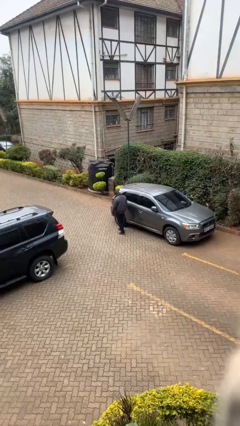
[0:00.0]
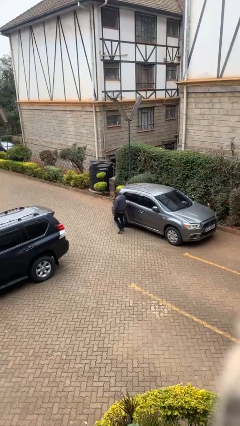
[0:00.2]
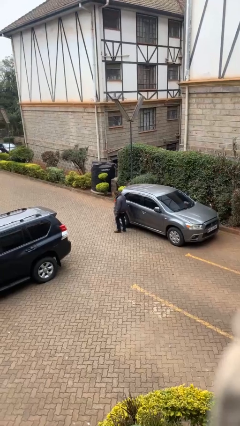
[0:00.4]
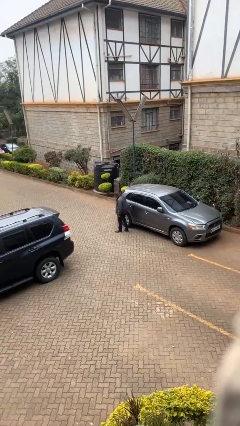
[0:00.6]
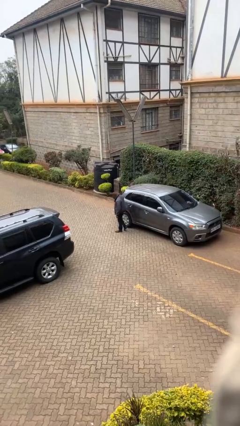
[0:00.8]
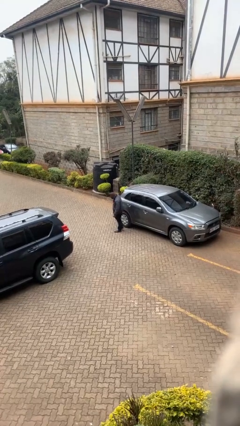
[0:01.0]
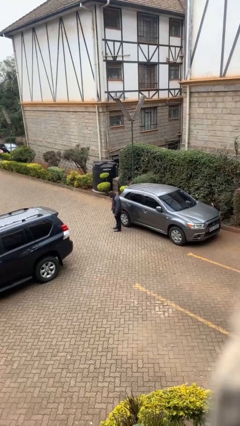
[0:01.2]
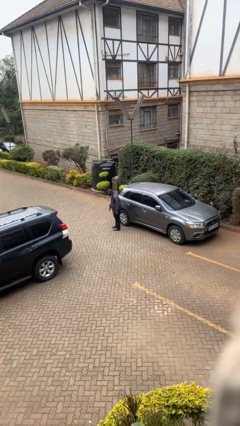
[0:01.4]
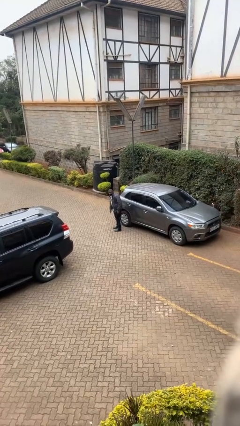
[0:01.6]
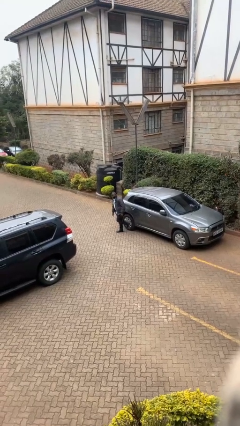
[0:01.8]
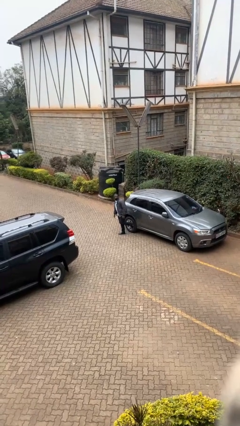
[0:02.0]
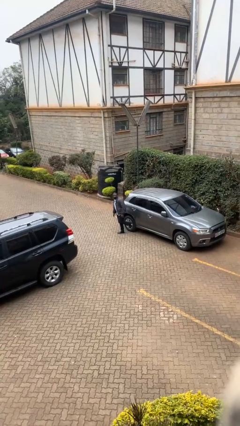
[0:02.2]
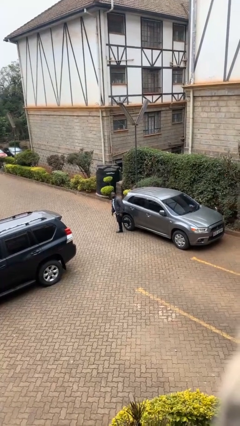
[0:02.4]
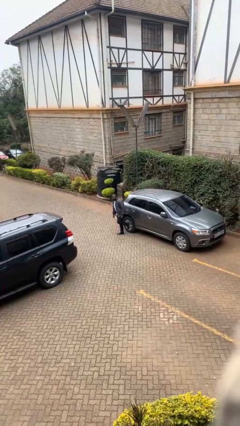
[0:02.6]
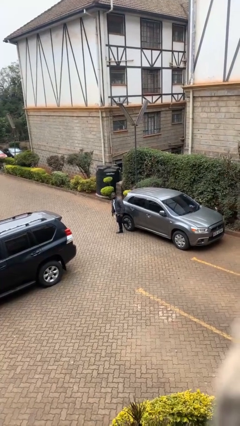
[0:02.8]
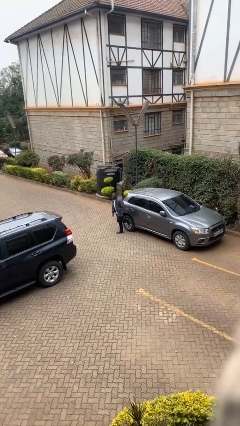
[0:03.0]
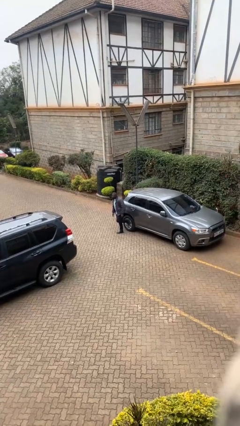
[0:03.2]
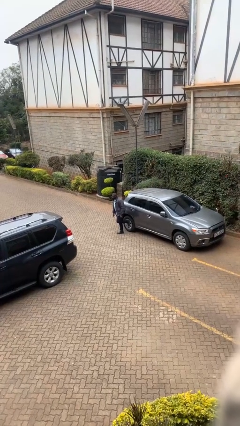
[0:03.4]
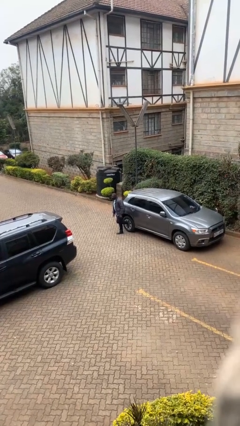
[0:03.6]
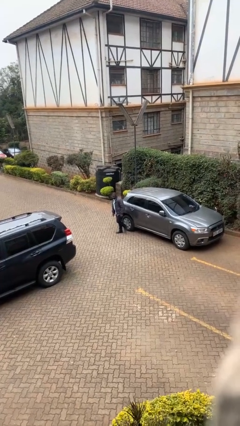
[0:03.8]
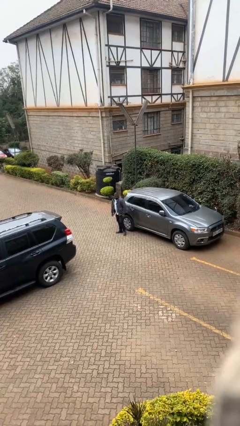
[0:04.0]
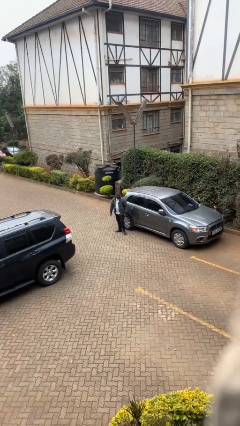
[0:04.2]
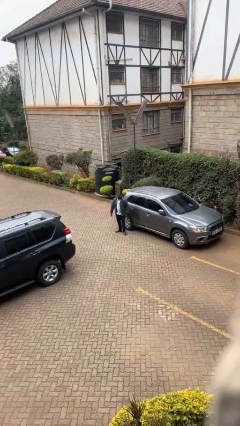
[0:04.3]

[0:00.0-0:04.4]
person kicks car tires

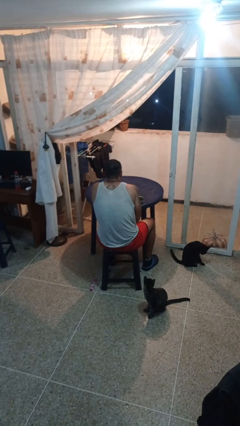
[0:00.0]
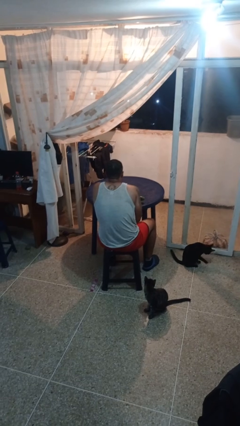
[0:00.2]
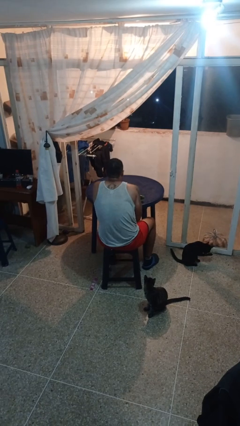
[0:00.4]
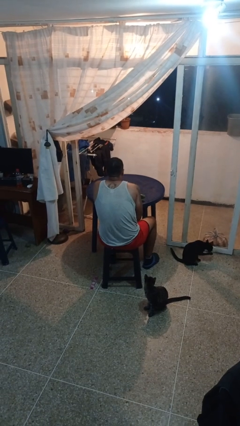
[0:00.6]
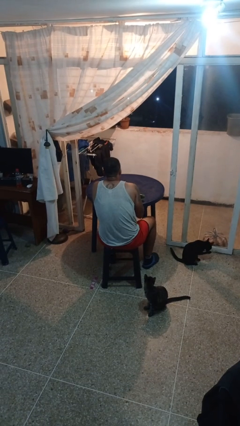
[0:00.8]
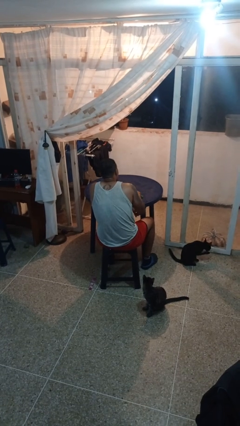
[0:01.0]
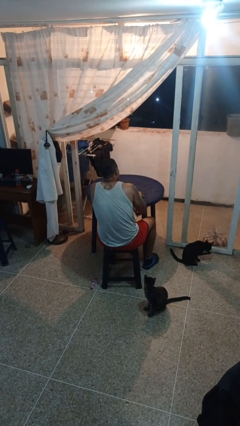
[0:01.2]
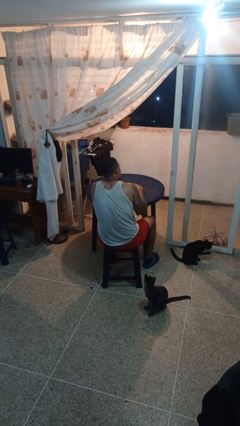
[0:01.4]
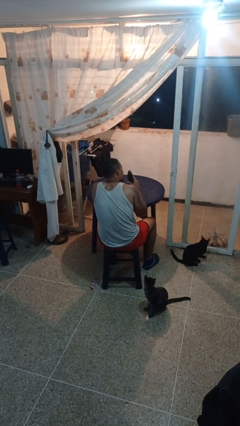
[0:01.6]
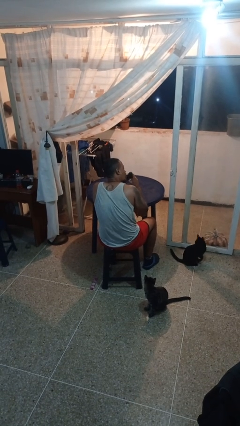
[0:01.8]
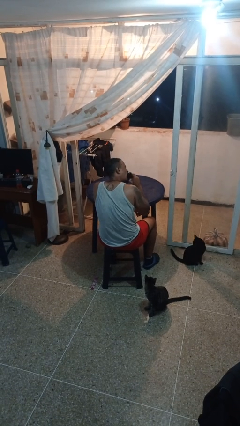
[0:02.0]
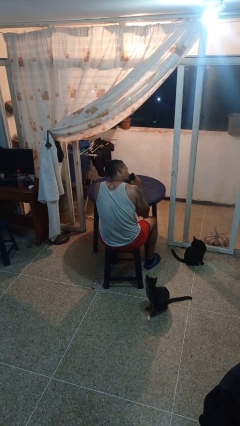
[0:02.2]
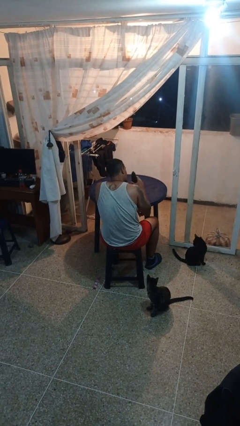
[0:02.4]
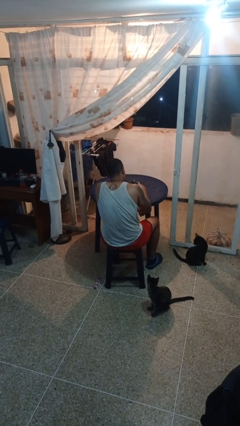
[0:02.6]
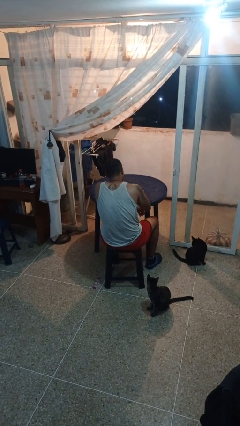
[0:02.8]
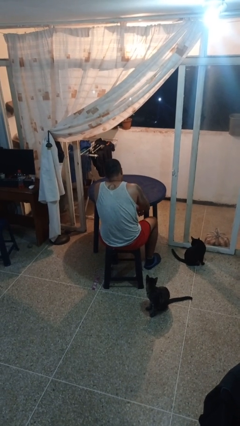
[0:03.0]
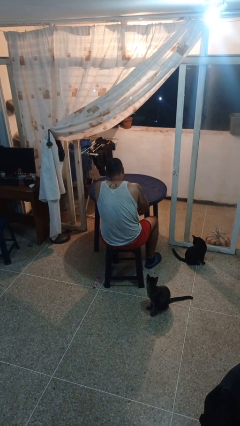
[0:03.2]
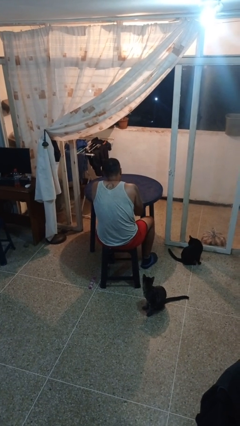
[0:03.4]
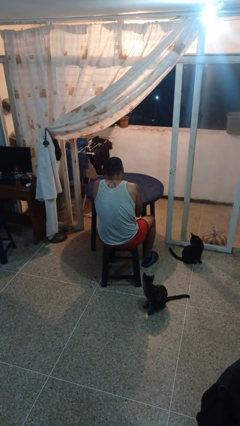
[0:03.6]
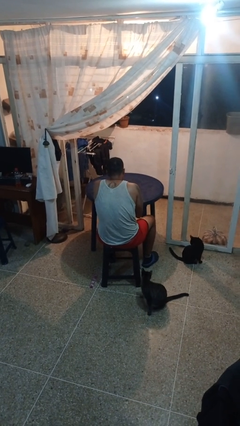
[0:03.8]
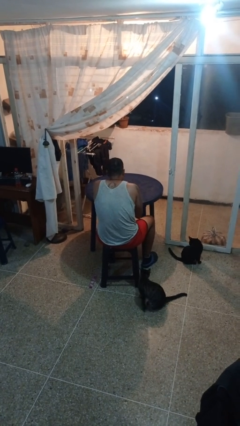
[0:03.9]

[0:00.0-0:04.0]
person eats with hands

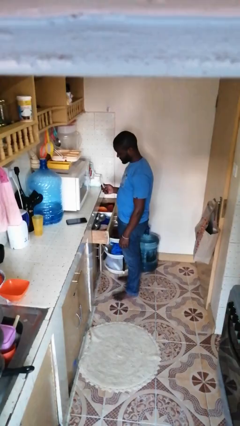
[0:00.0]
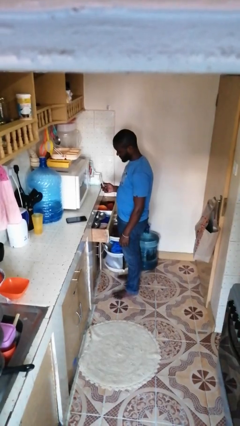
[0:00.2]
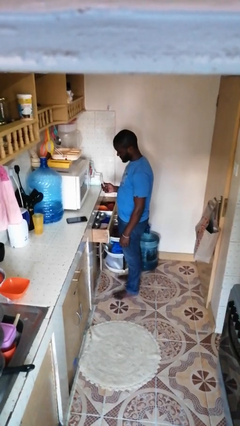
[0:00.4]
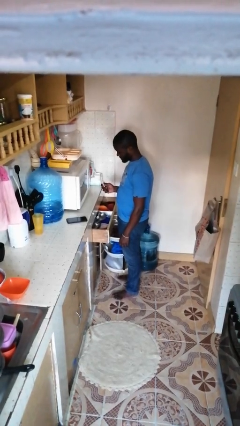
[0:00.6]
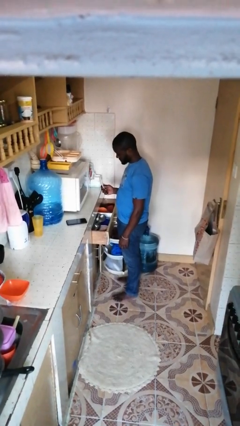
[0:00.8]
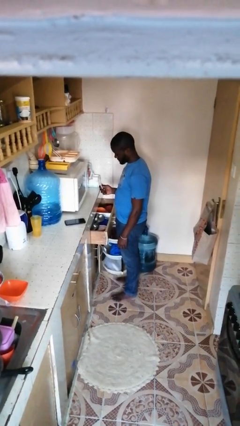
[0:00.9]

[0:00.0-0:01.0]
person puts object into kitchen drawer

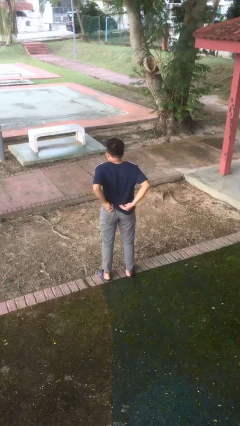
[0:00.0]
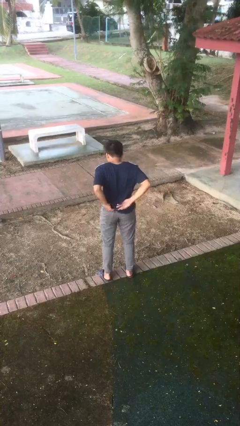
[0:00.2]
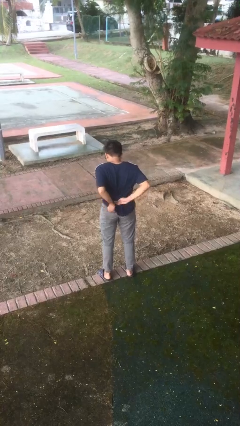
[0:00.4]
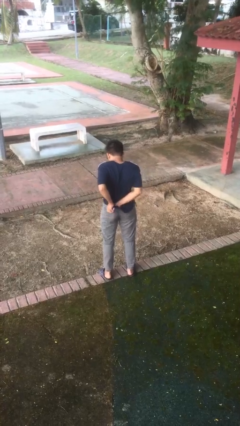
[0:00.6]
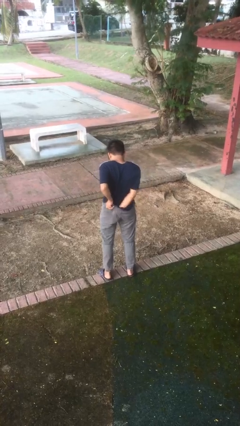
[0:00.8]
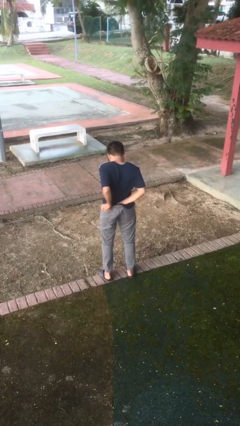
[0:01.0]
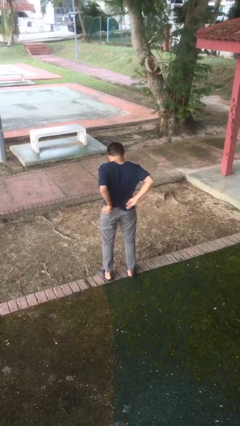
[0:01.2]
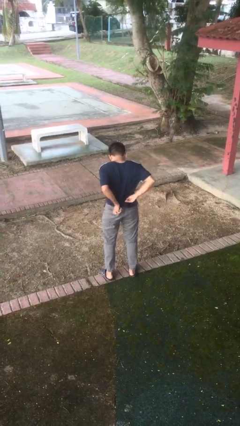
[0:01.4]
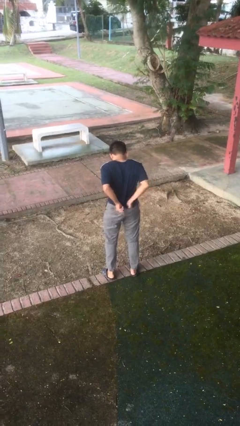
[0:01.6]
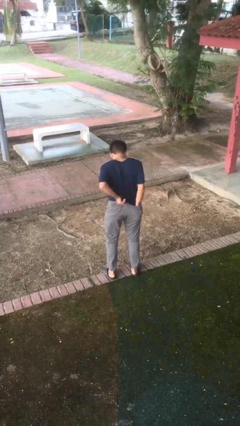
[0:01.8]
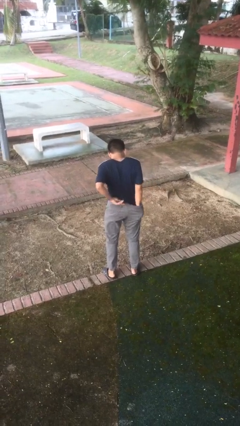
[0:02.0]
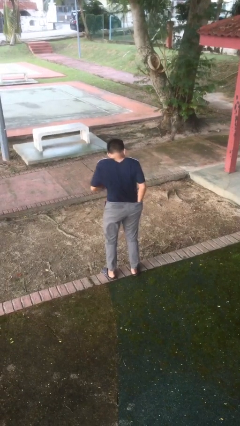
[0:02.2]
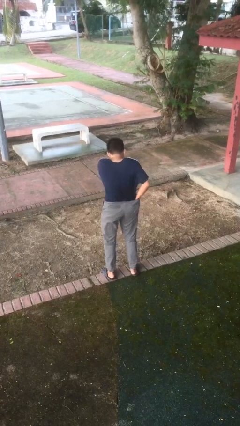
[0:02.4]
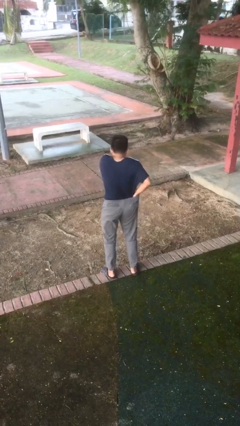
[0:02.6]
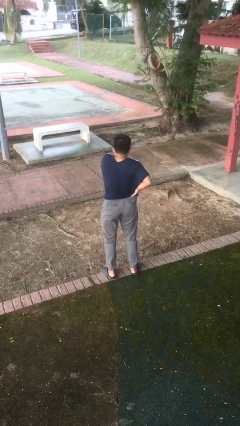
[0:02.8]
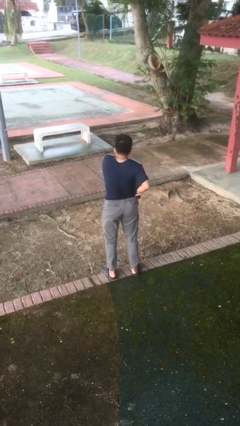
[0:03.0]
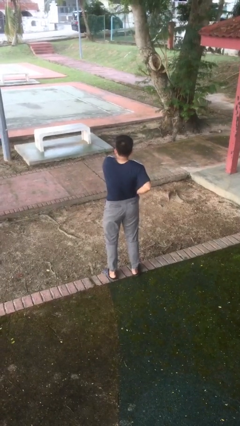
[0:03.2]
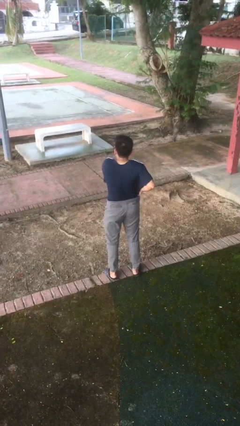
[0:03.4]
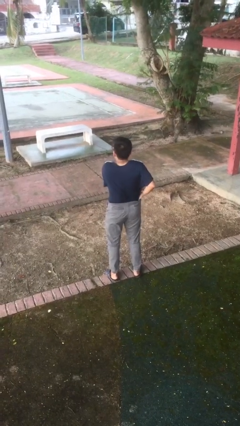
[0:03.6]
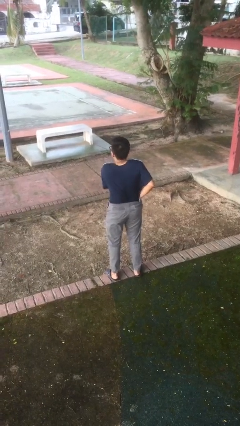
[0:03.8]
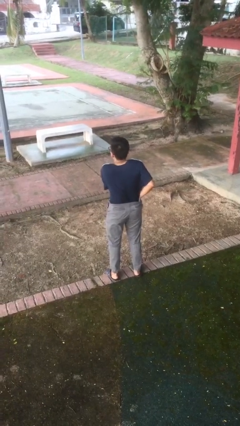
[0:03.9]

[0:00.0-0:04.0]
person tucks in shirt

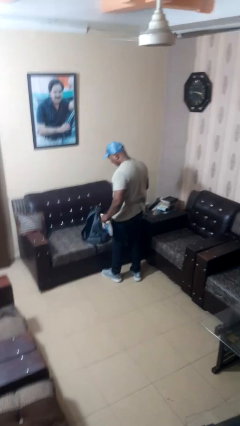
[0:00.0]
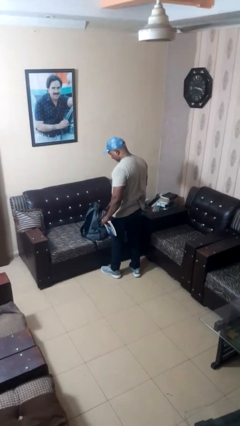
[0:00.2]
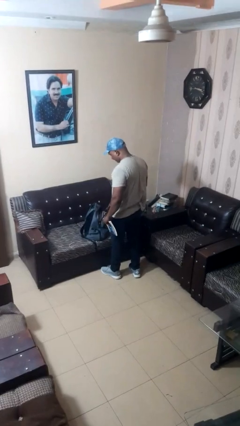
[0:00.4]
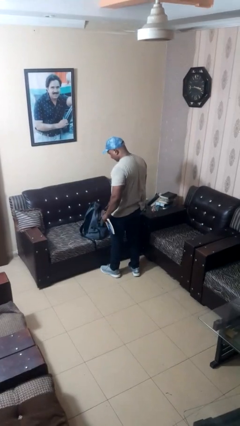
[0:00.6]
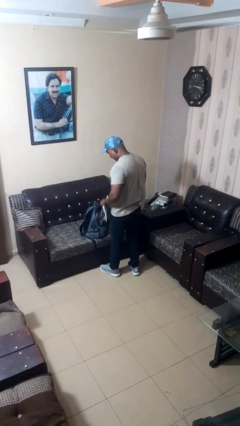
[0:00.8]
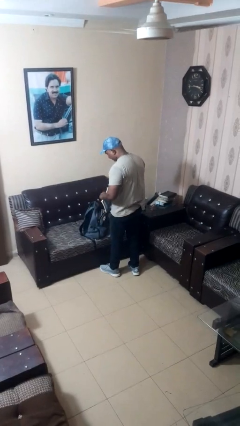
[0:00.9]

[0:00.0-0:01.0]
person takes object from backpack

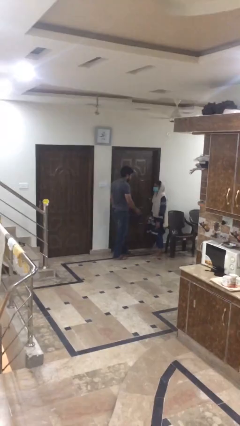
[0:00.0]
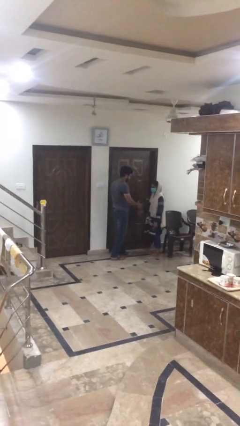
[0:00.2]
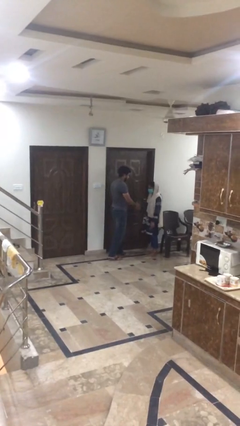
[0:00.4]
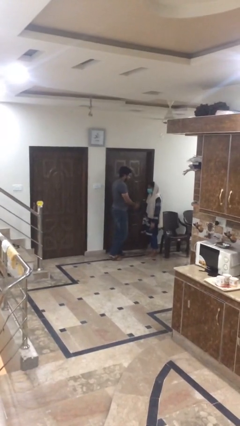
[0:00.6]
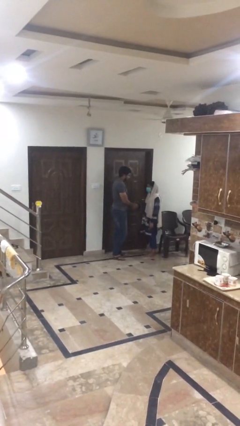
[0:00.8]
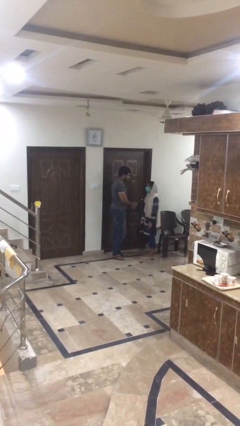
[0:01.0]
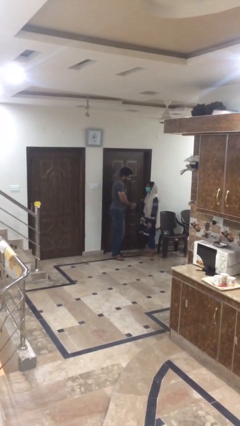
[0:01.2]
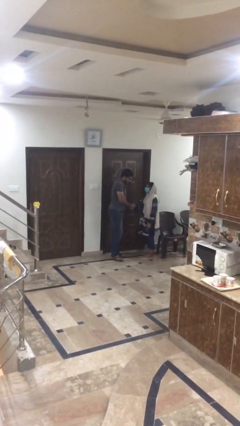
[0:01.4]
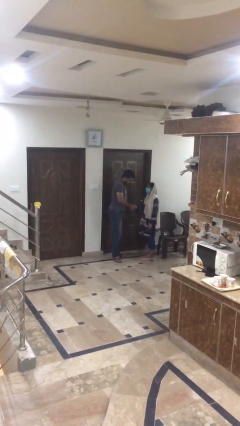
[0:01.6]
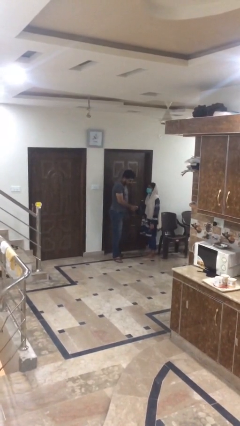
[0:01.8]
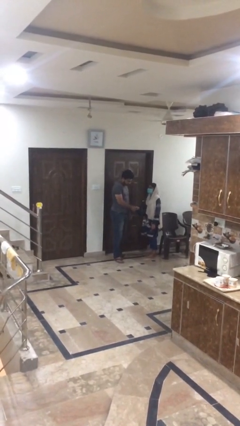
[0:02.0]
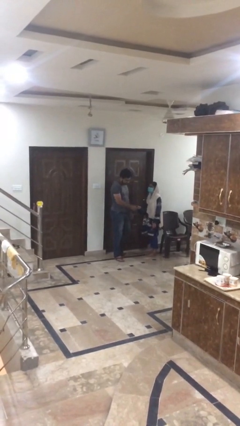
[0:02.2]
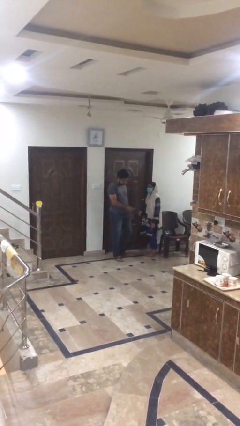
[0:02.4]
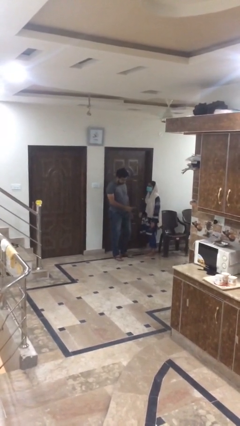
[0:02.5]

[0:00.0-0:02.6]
person shakes hand

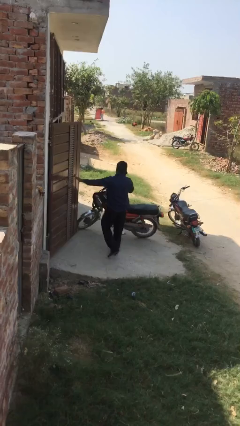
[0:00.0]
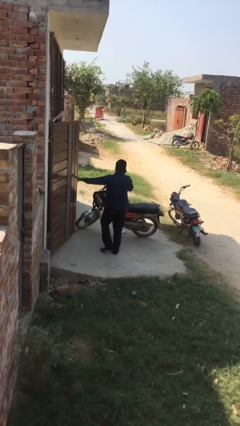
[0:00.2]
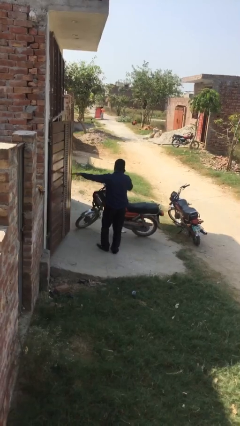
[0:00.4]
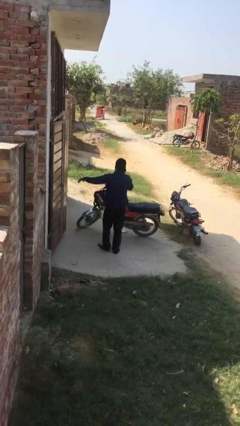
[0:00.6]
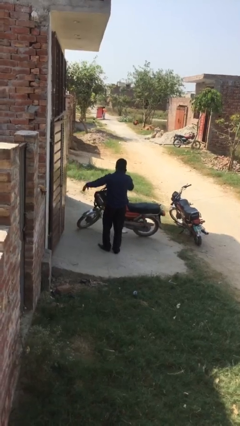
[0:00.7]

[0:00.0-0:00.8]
person opens facility door
